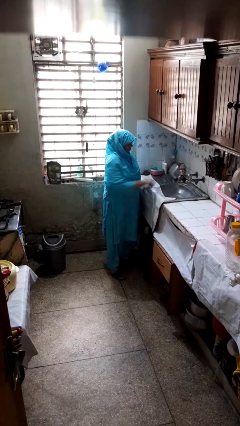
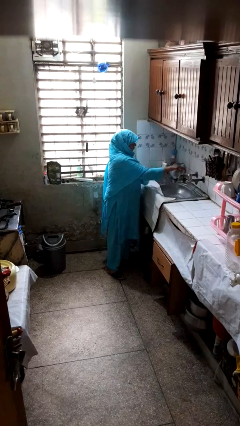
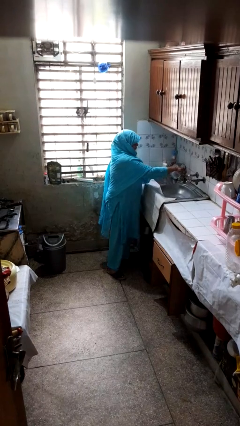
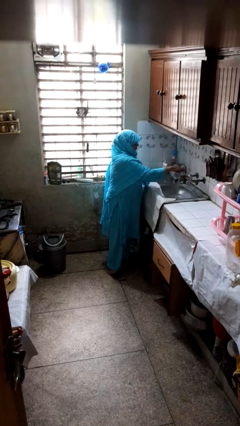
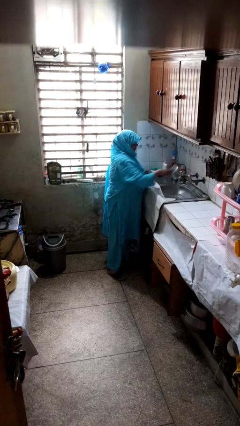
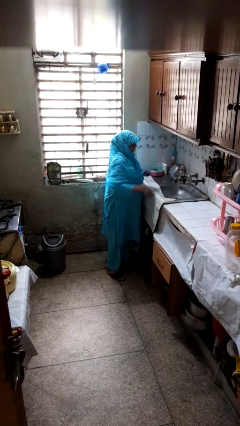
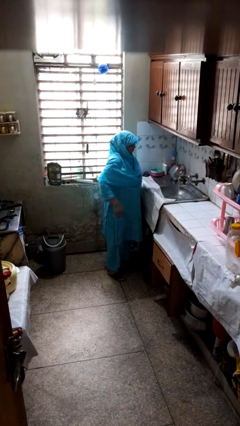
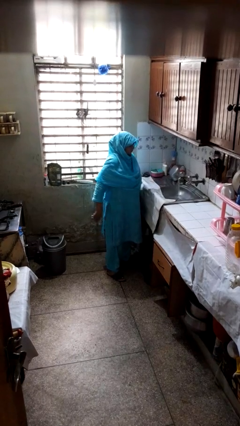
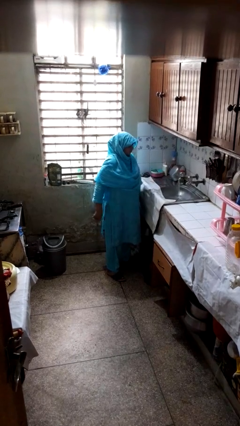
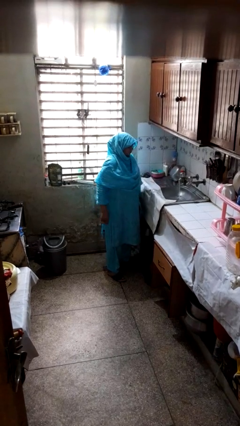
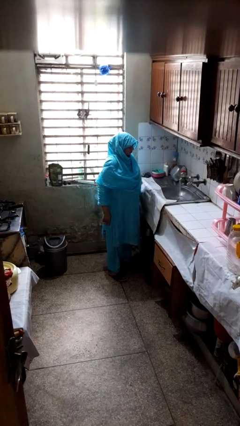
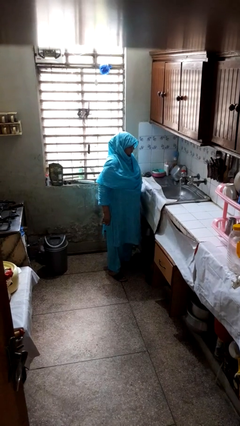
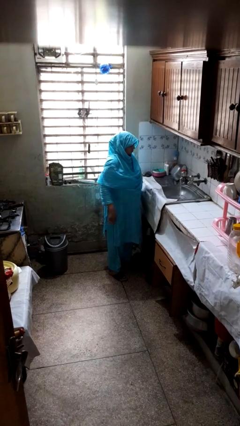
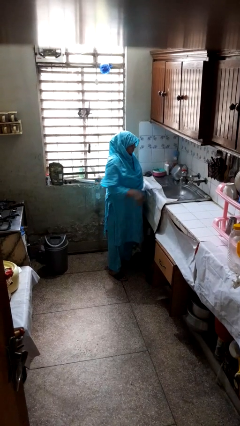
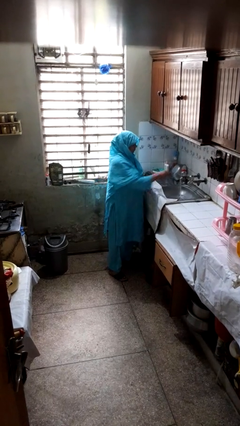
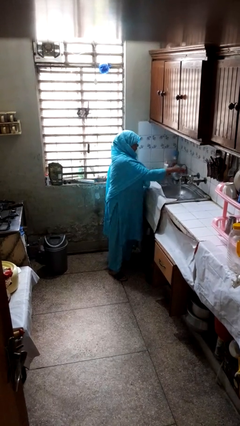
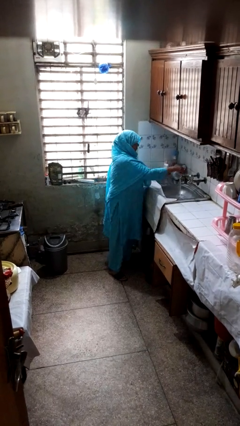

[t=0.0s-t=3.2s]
person turns on faucet

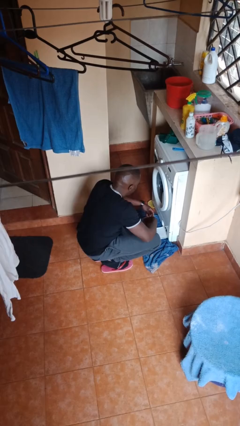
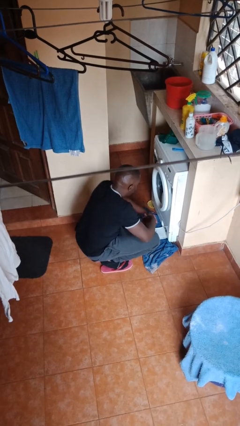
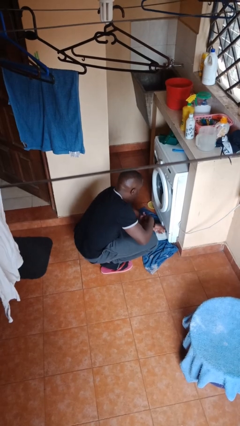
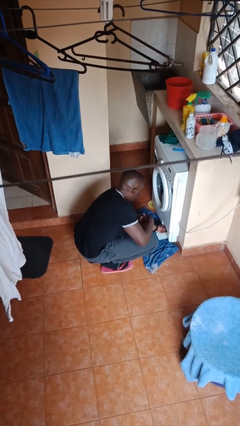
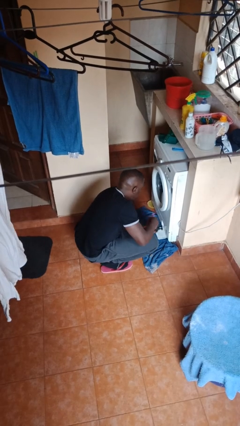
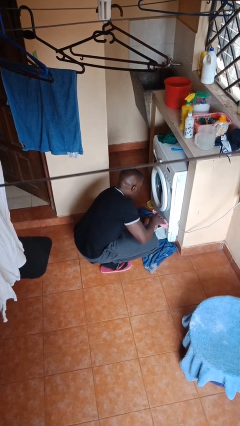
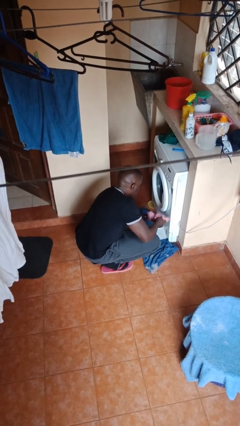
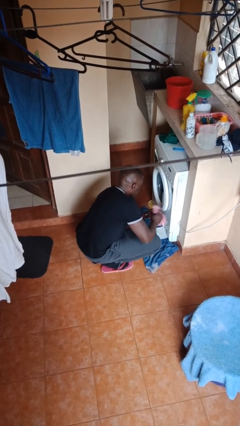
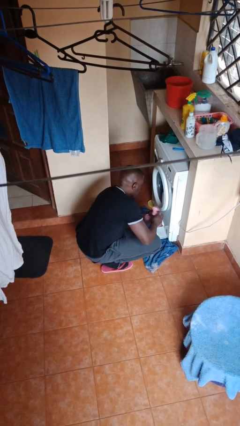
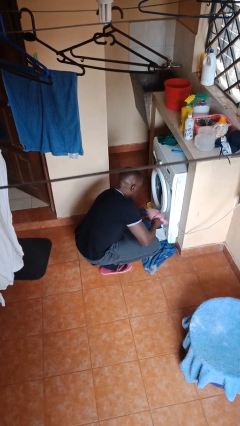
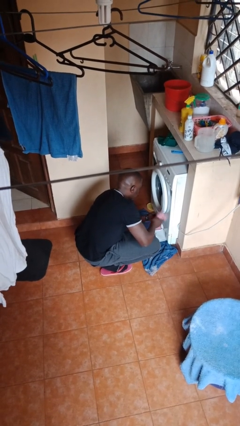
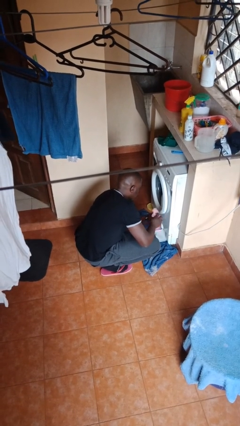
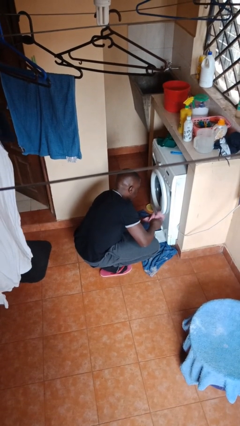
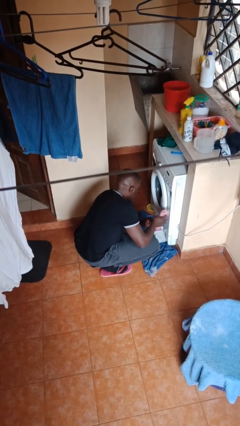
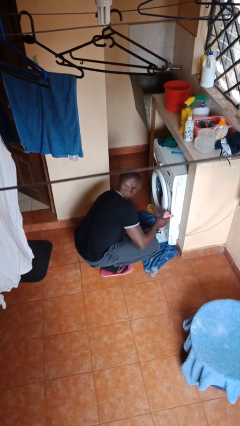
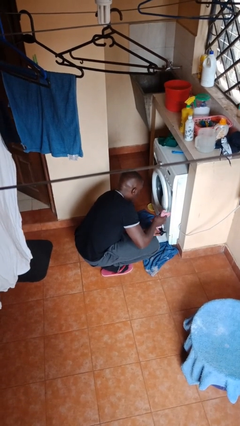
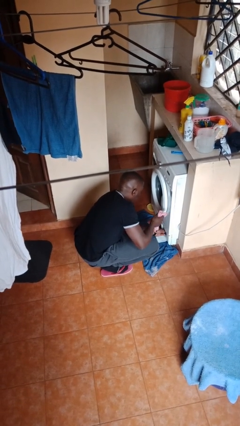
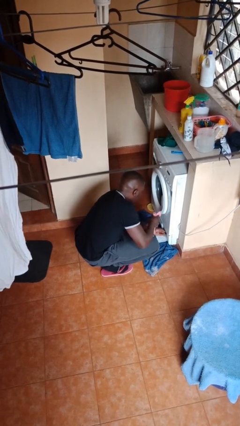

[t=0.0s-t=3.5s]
person cleans dryer lint trap

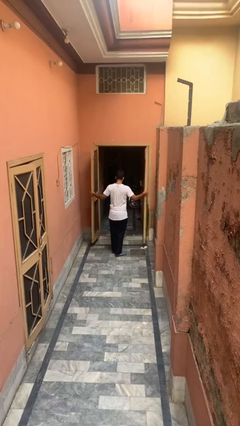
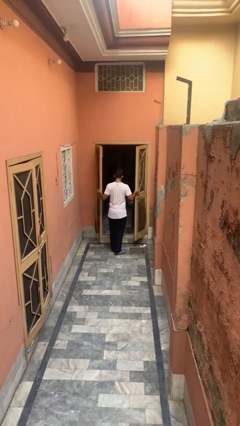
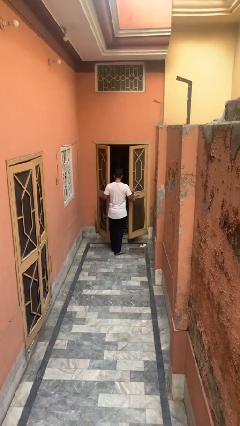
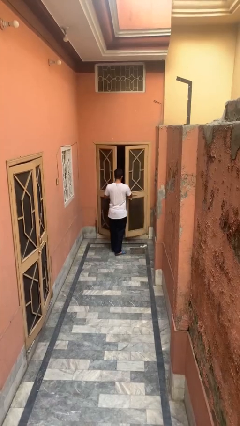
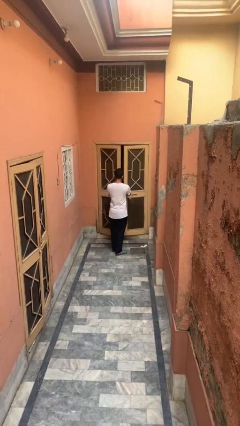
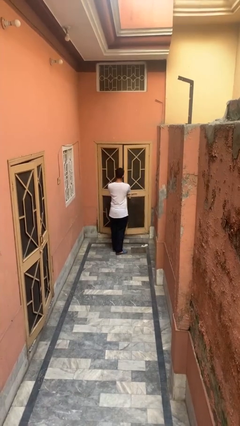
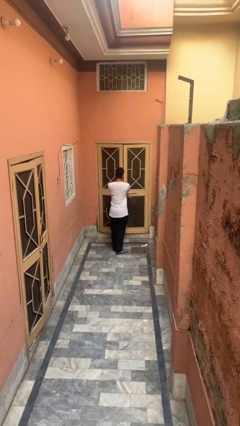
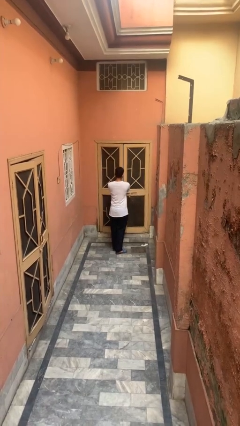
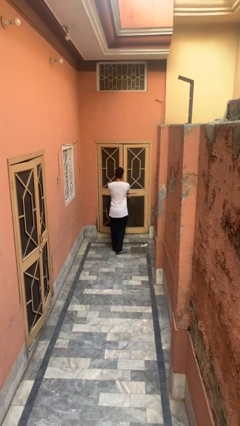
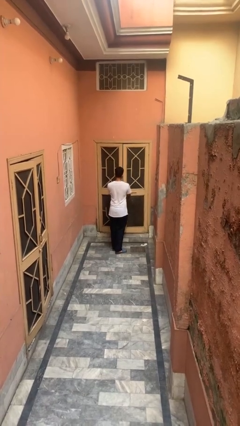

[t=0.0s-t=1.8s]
person closes gate

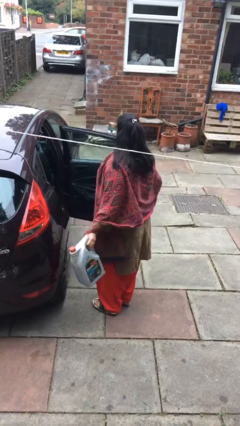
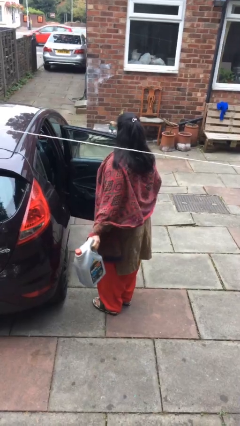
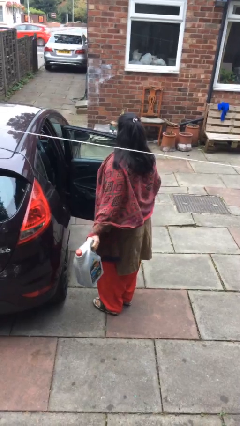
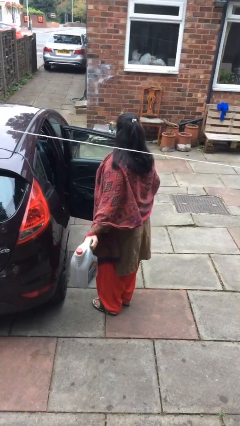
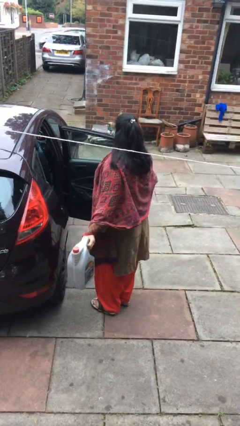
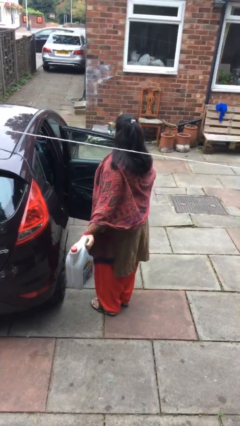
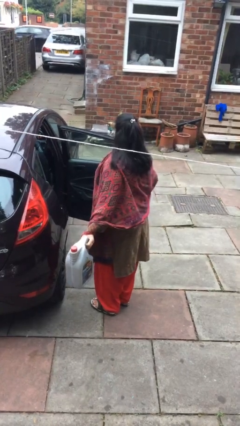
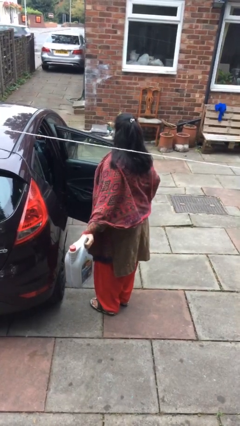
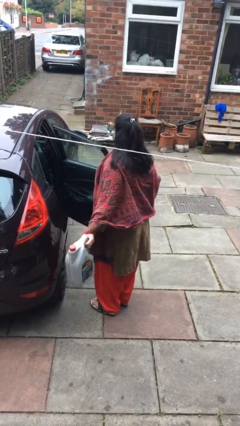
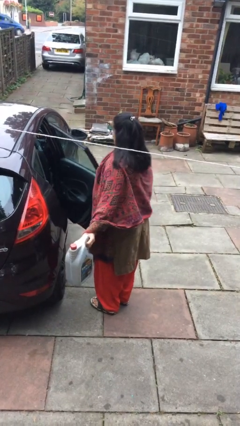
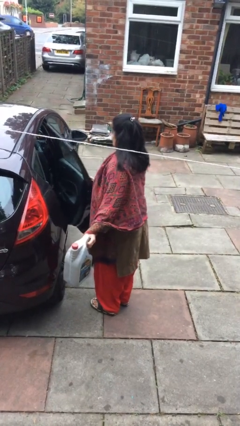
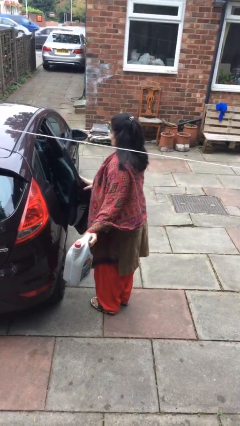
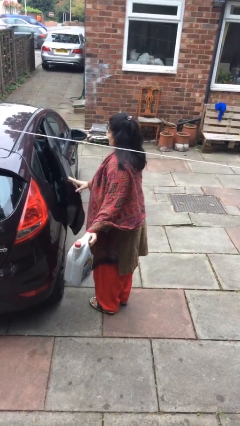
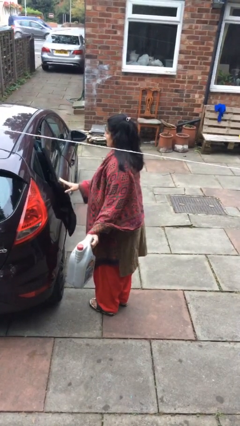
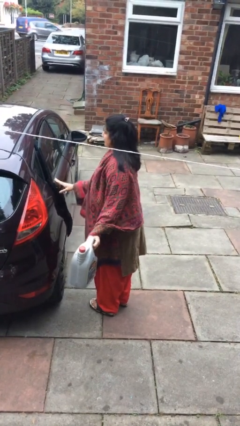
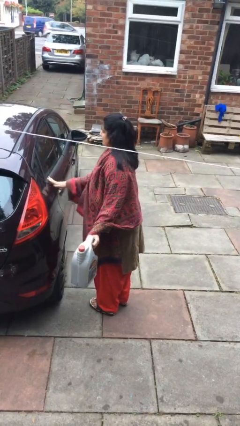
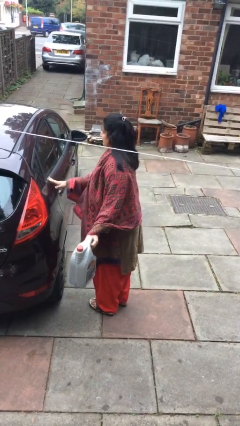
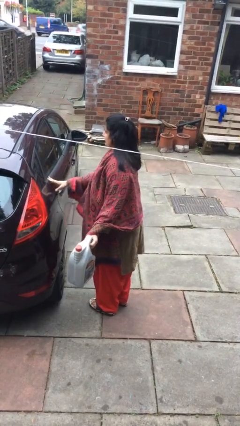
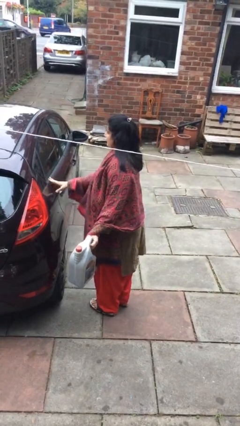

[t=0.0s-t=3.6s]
person closes car door

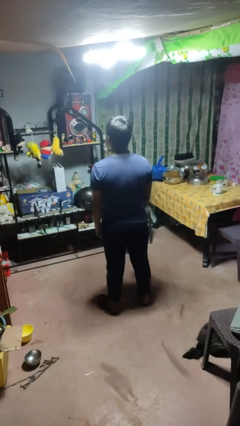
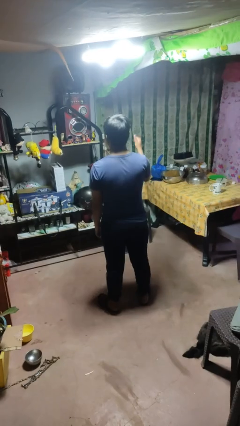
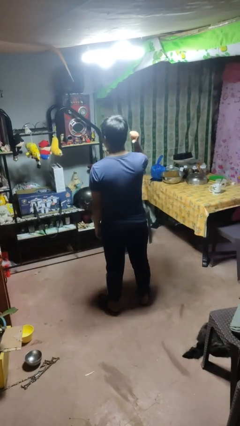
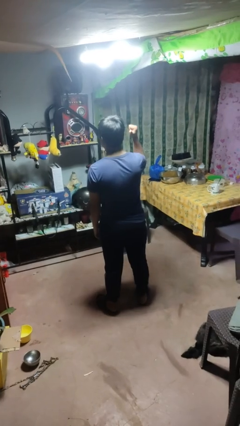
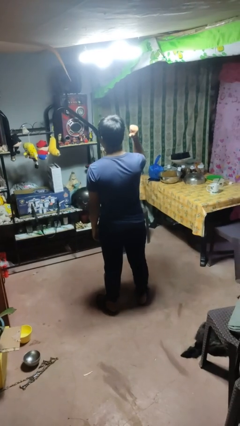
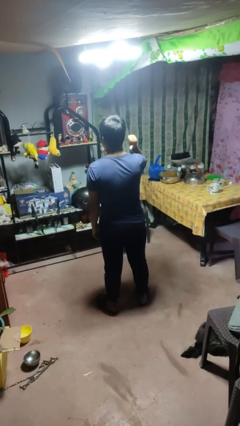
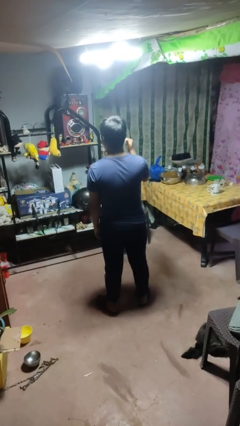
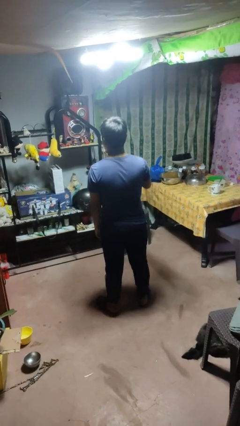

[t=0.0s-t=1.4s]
person gestures behind me

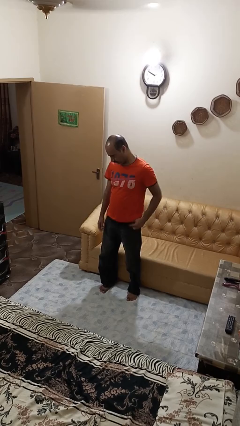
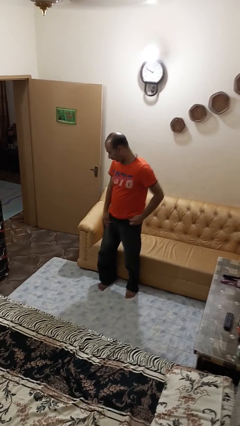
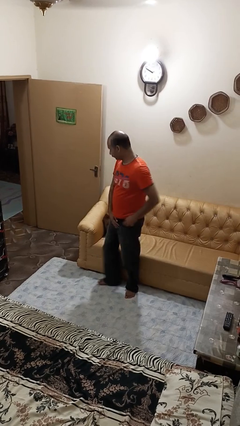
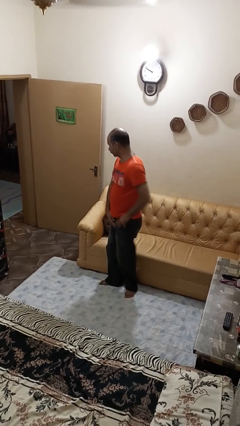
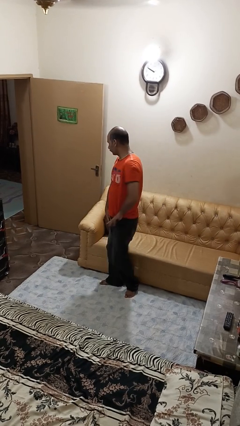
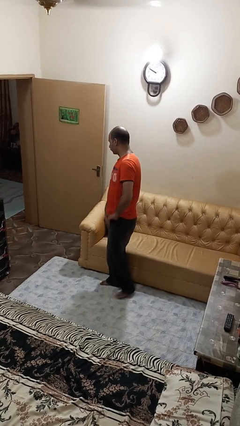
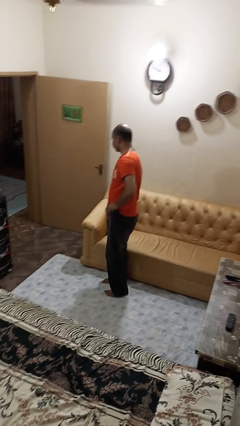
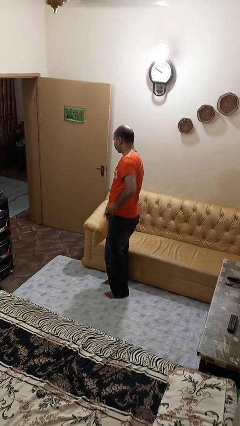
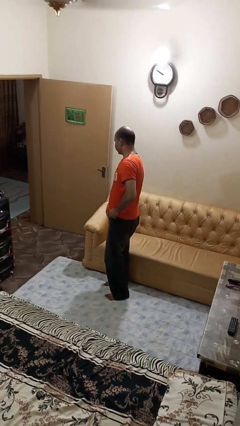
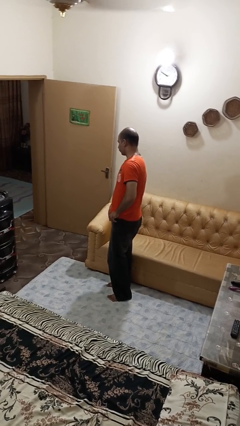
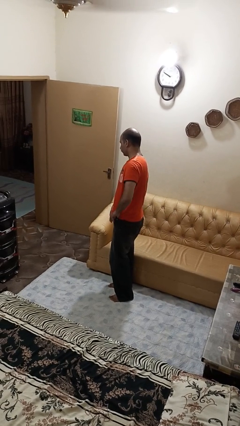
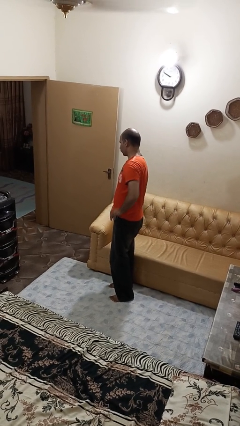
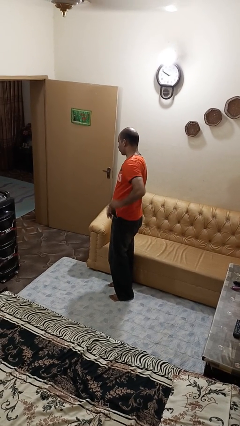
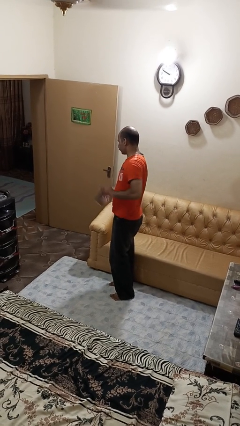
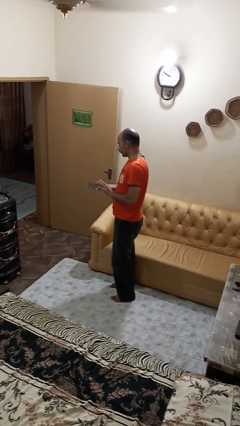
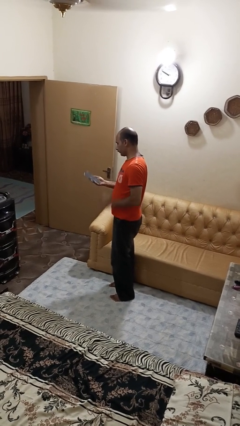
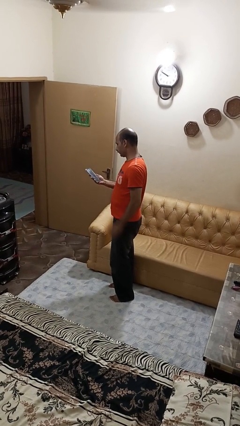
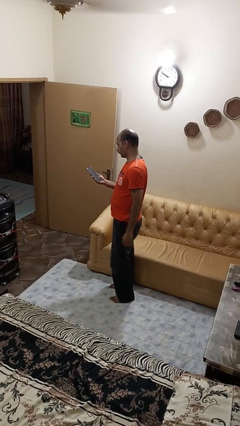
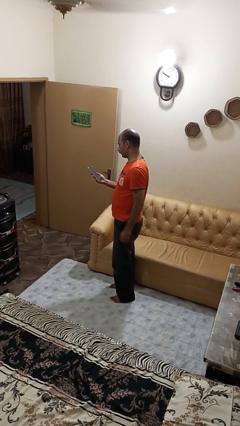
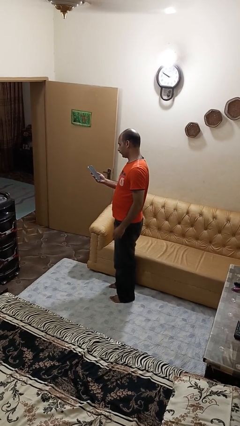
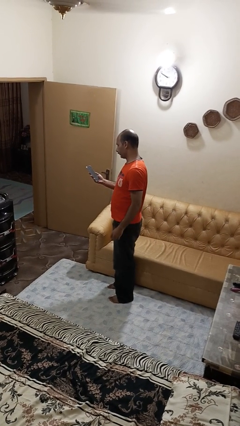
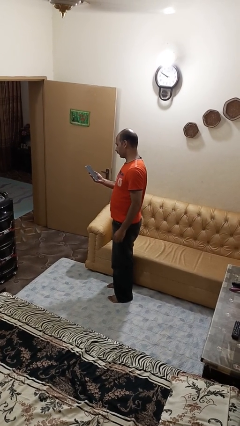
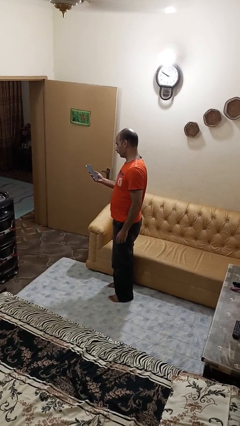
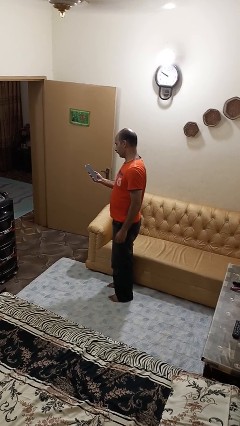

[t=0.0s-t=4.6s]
person takes phone from pocket
